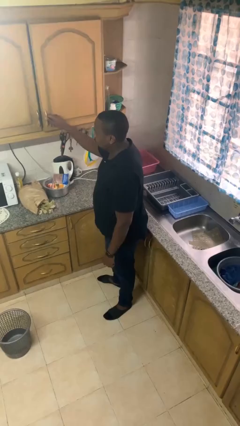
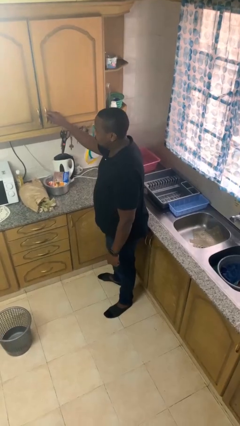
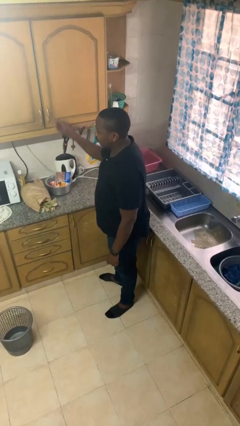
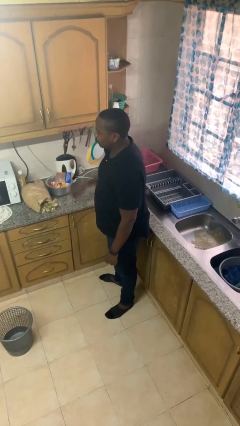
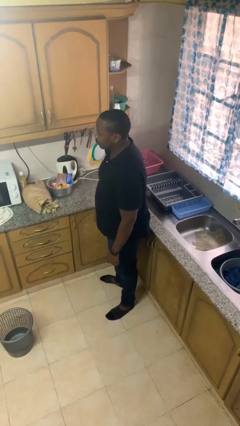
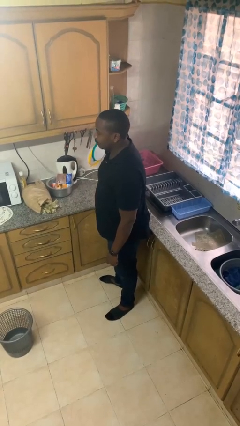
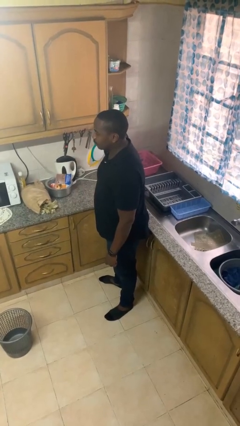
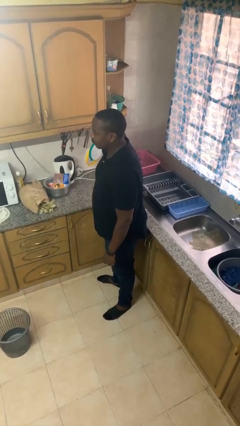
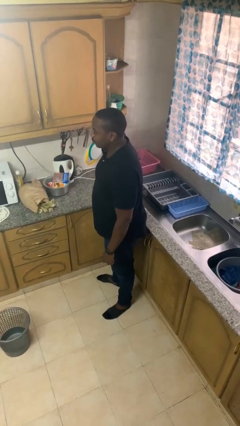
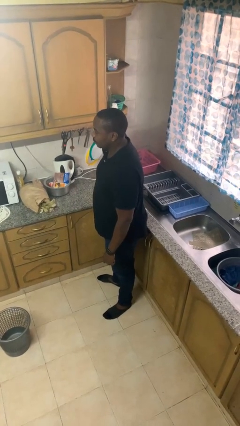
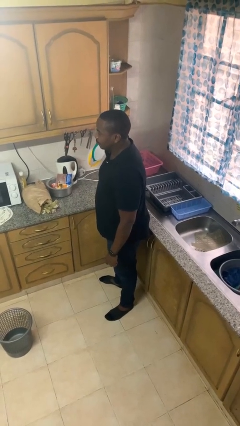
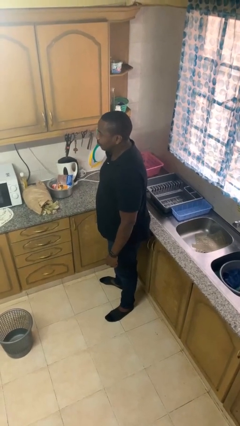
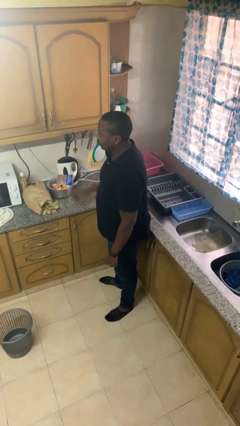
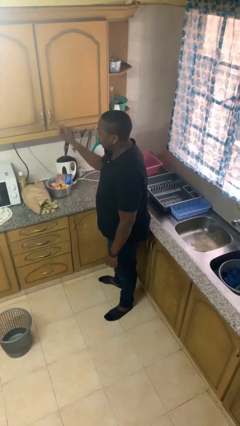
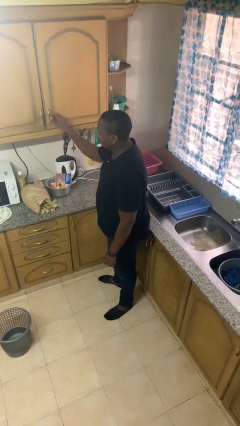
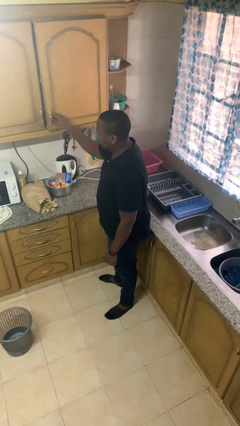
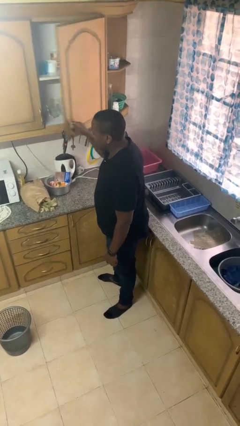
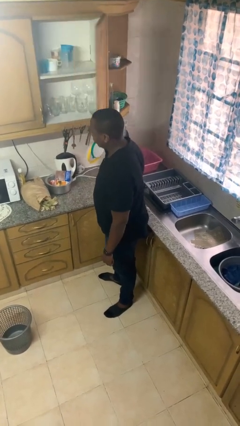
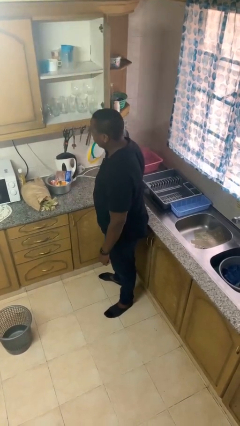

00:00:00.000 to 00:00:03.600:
person closes cabinet

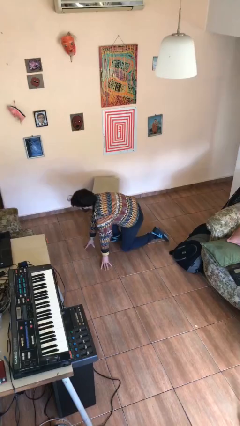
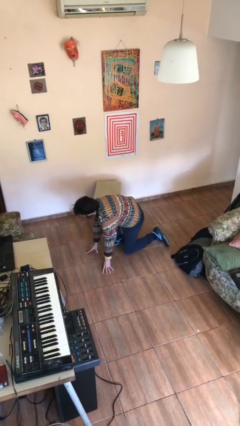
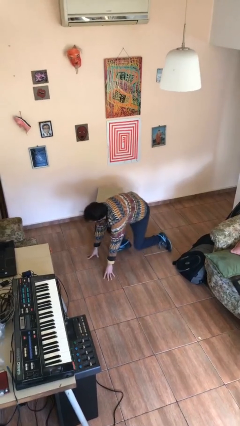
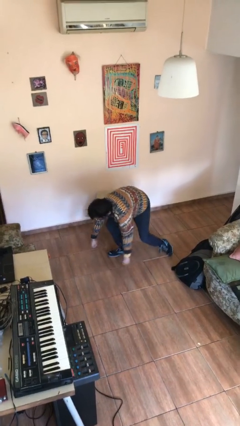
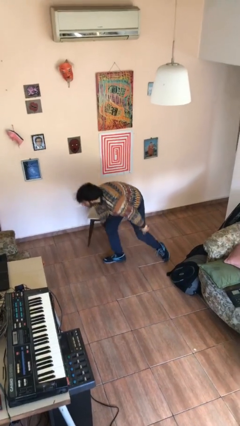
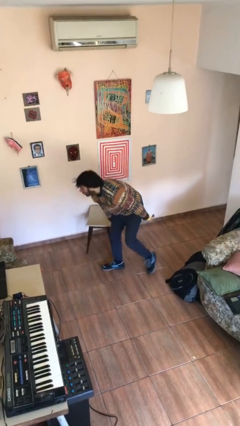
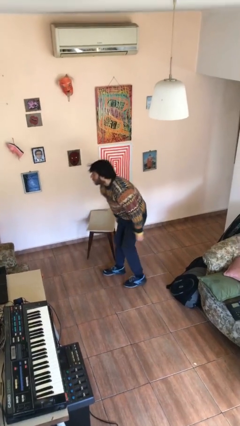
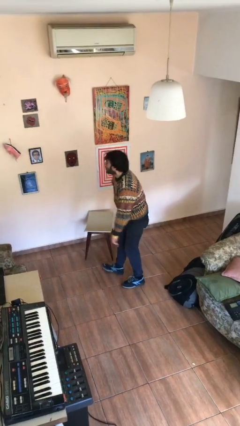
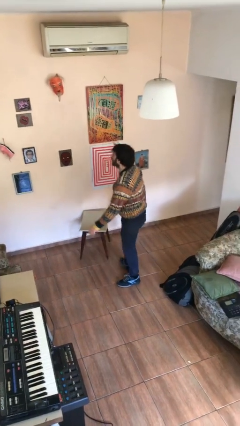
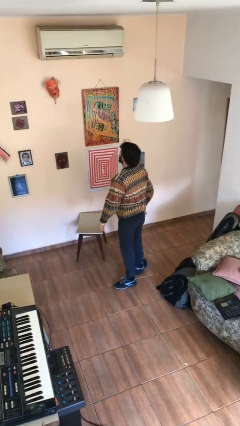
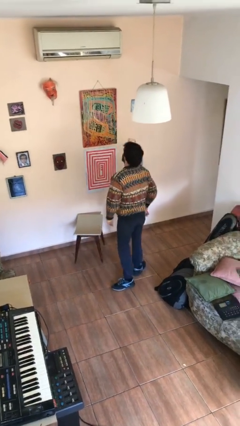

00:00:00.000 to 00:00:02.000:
person stands up from floor

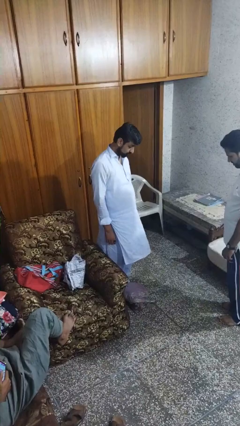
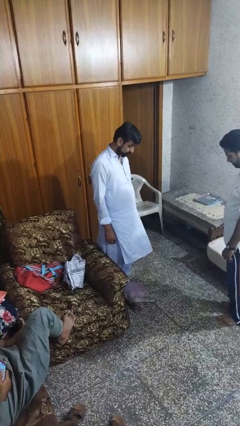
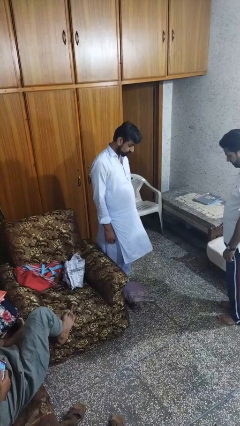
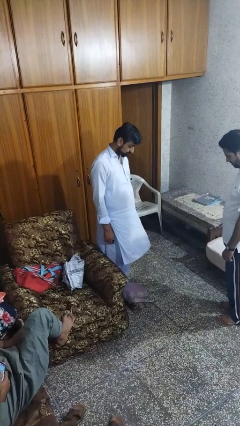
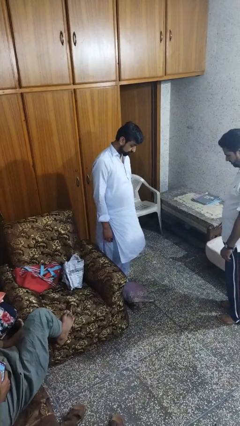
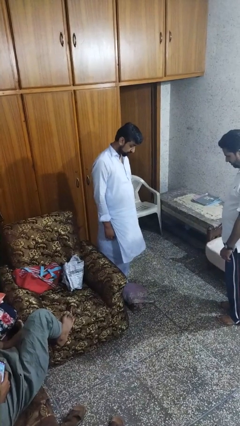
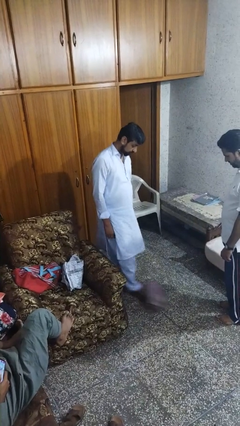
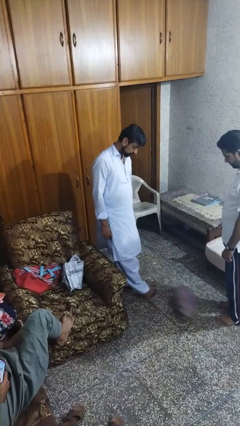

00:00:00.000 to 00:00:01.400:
person kicks object to person

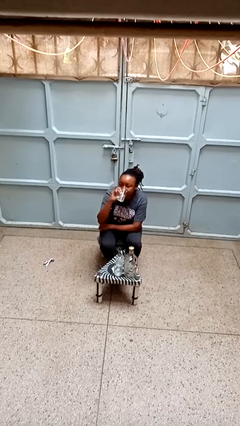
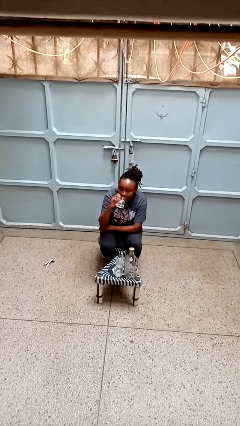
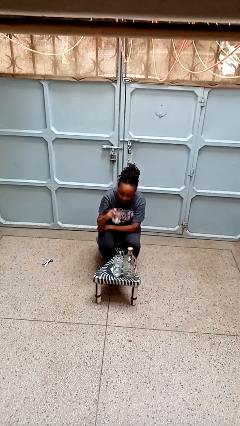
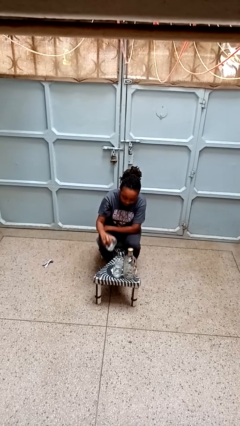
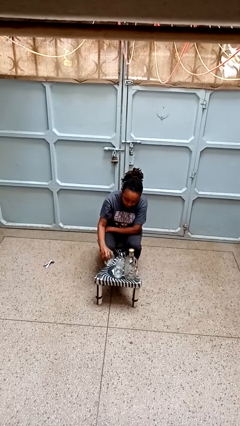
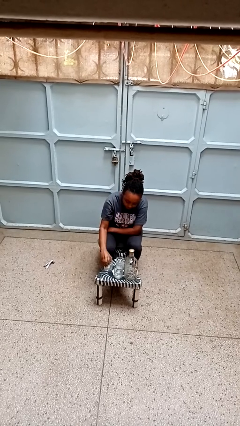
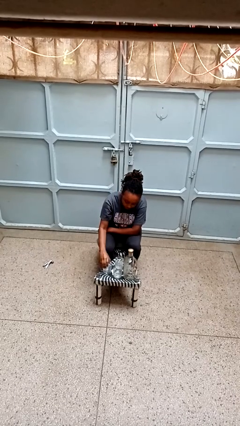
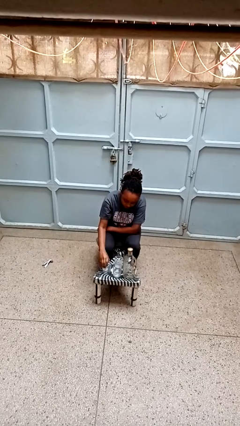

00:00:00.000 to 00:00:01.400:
person puts down object on table

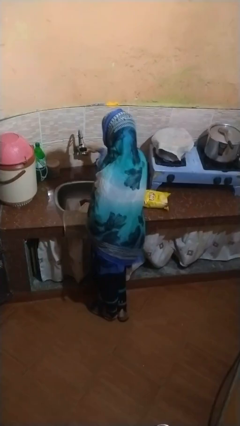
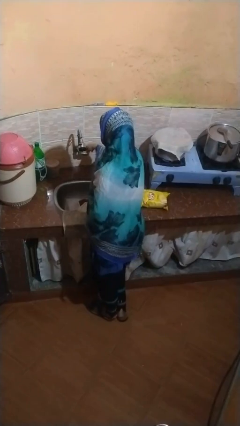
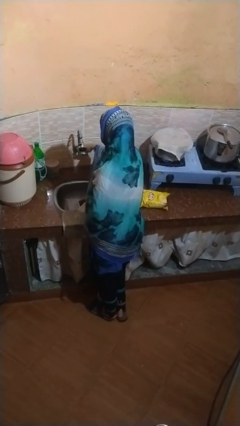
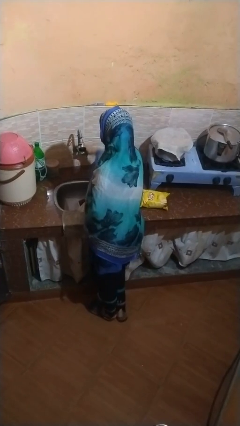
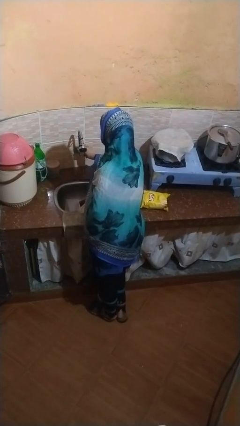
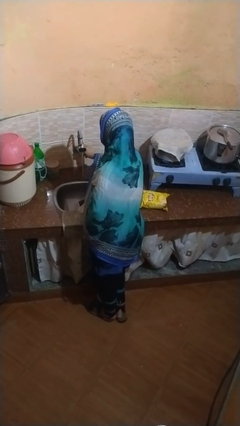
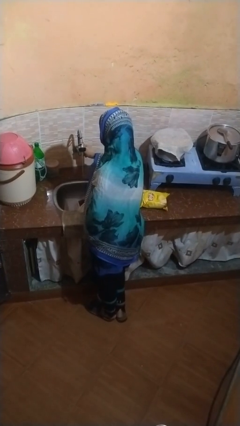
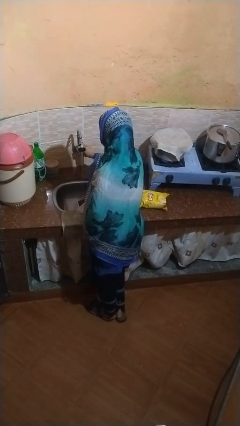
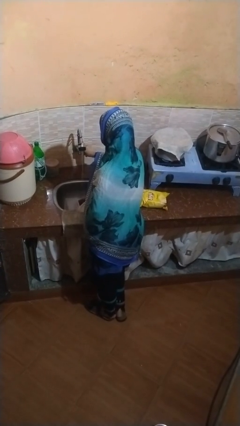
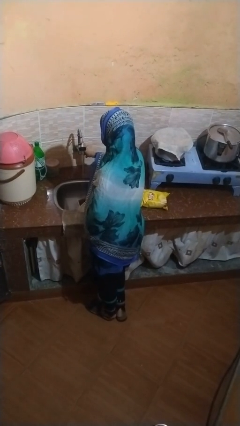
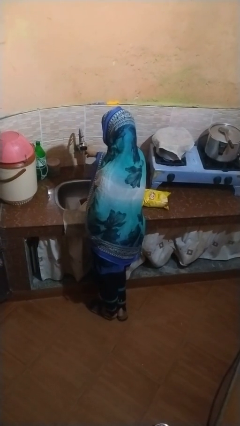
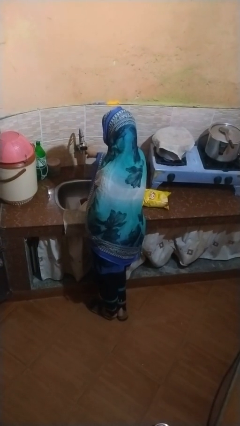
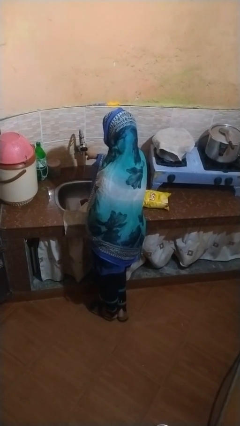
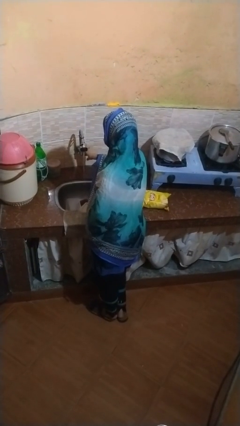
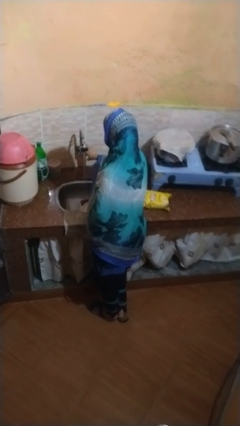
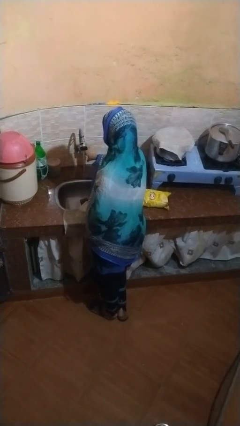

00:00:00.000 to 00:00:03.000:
person turns on faucet

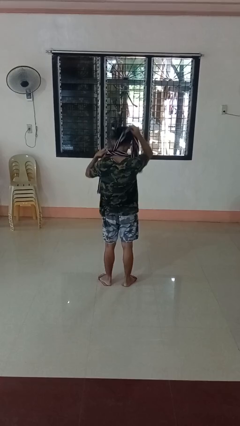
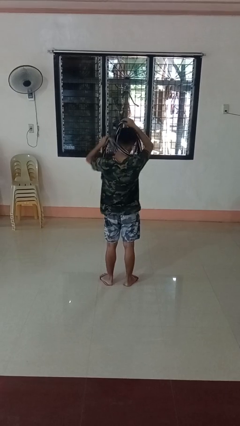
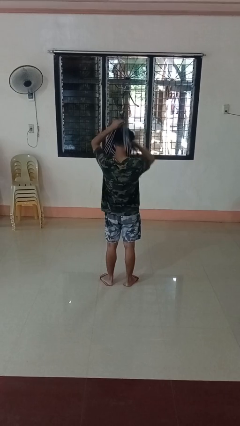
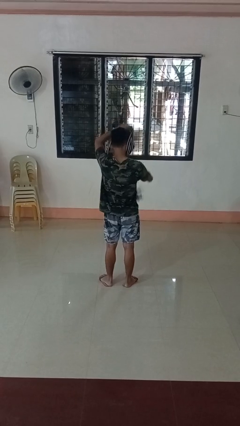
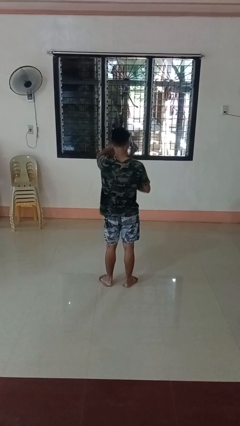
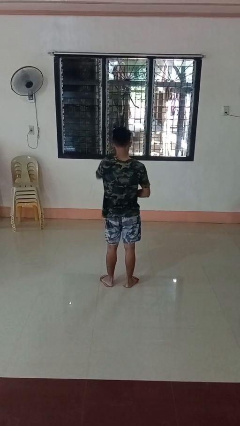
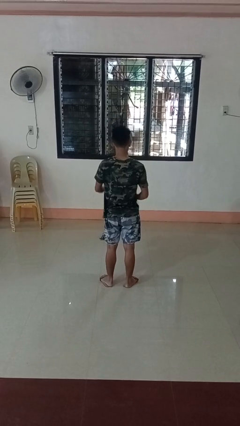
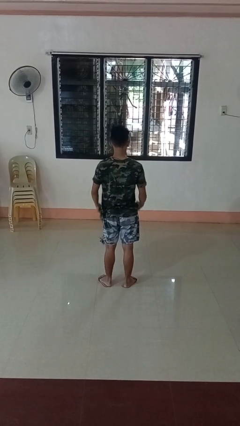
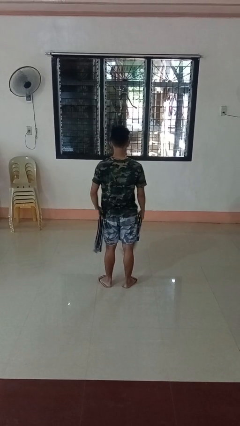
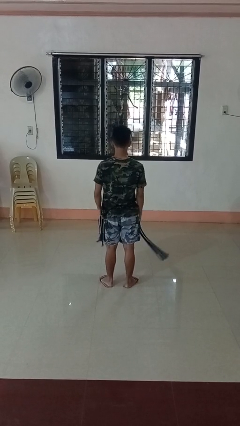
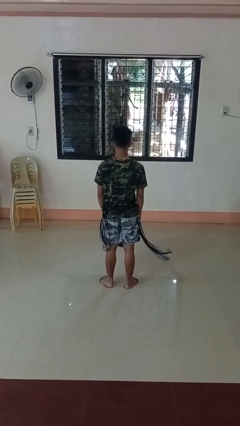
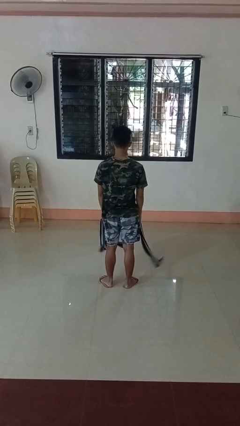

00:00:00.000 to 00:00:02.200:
person takes off scarf

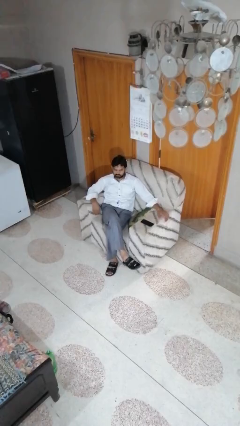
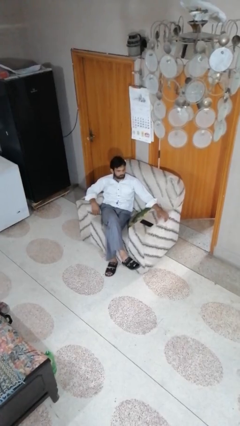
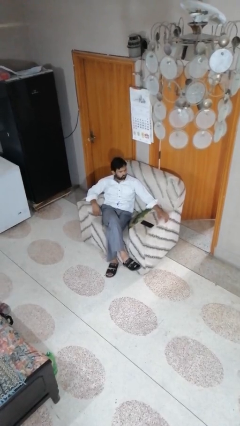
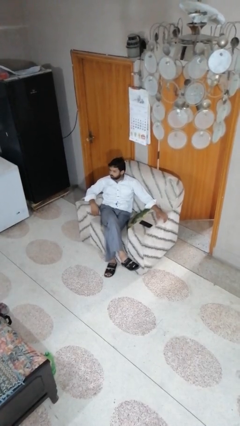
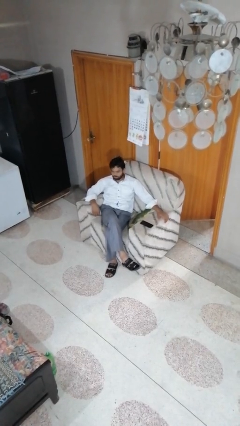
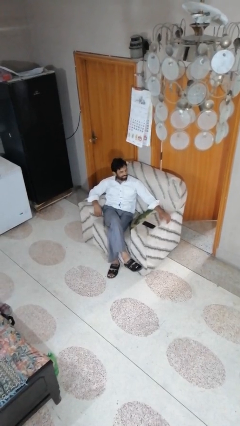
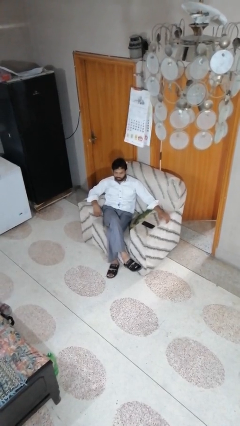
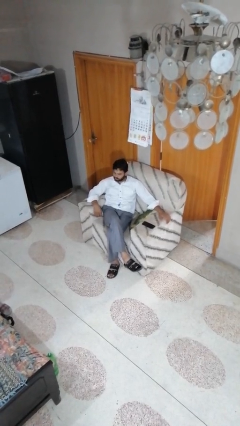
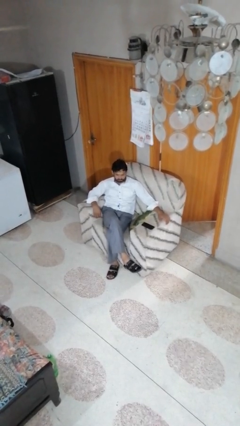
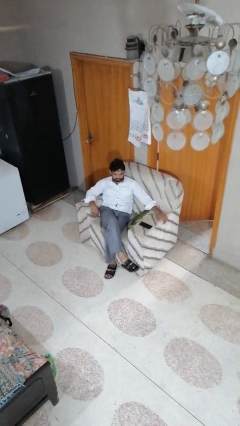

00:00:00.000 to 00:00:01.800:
person shakes head

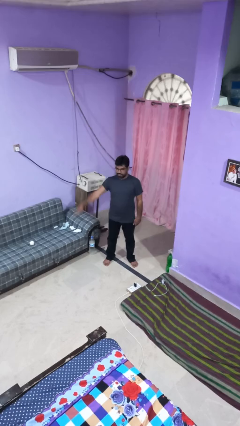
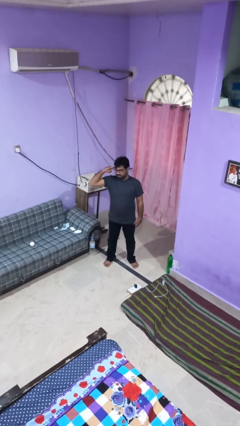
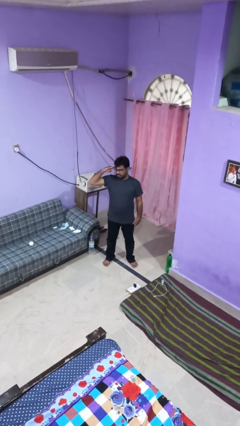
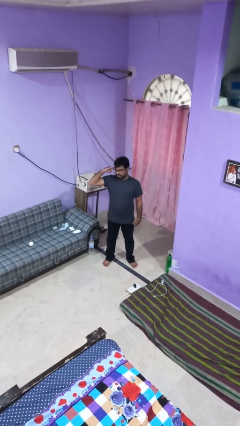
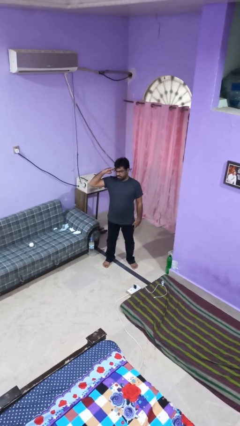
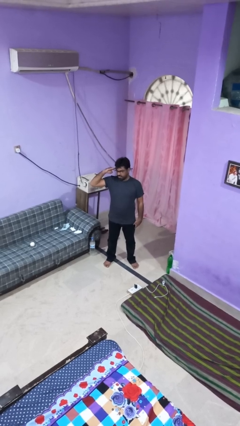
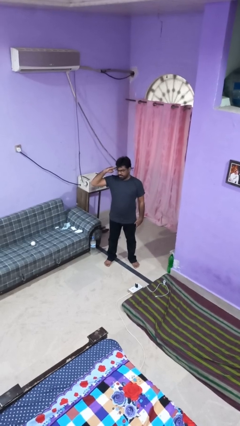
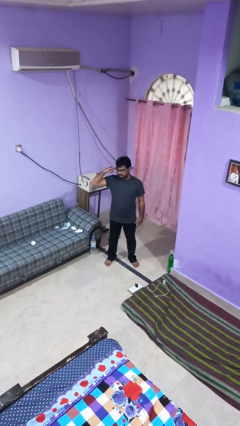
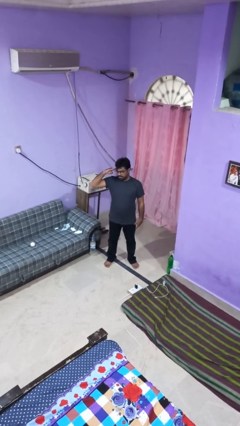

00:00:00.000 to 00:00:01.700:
person salutes
